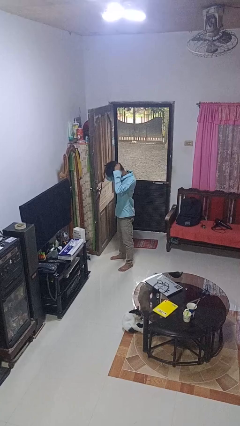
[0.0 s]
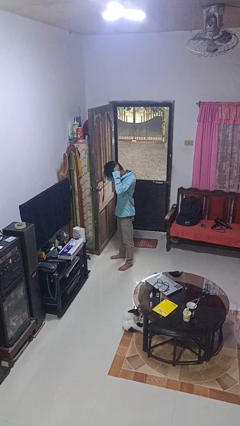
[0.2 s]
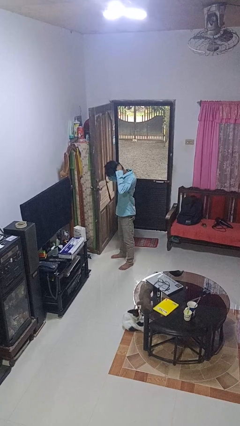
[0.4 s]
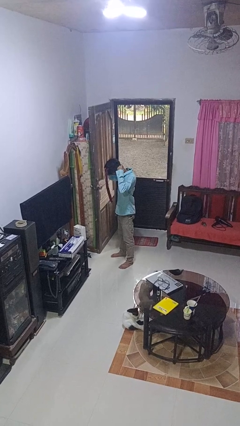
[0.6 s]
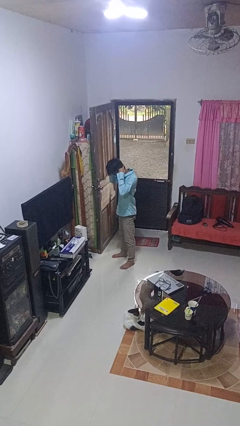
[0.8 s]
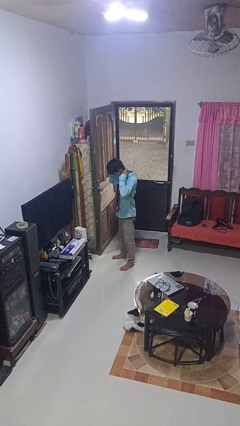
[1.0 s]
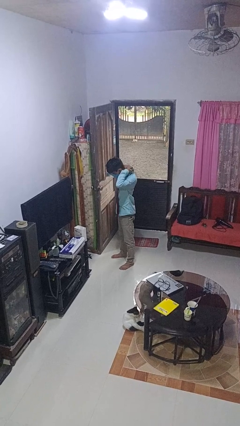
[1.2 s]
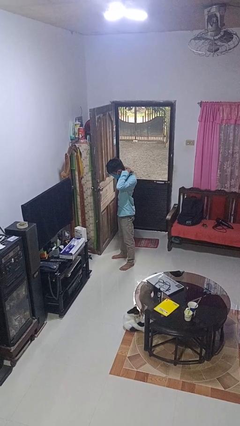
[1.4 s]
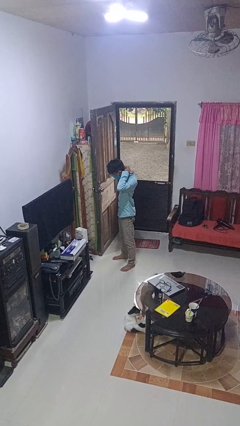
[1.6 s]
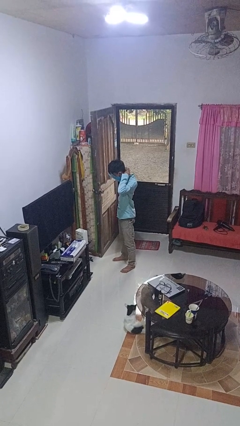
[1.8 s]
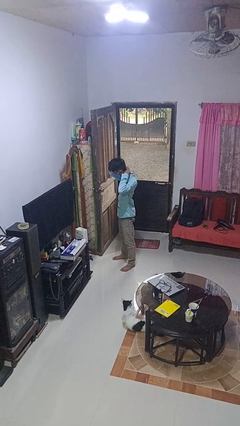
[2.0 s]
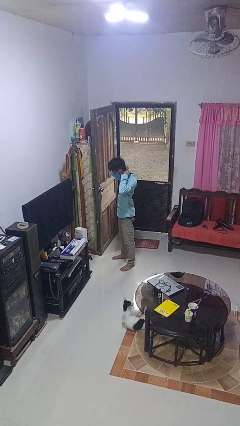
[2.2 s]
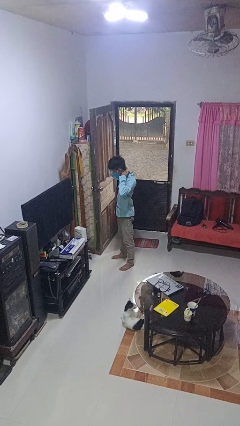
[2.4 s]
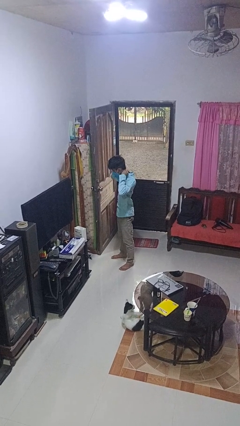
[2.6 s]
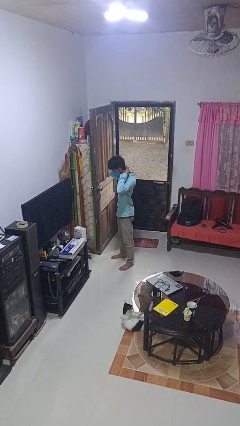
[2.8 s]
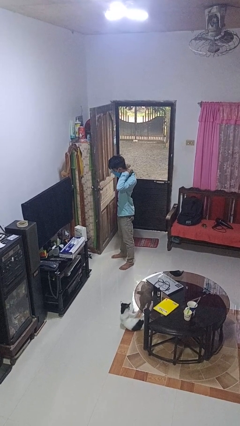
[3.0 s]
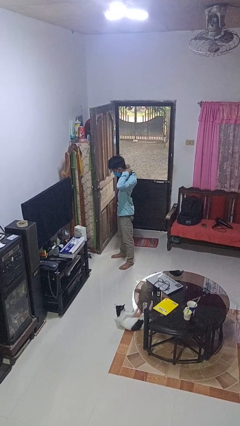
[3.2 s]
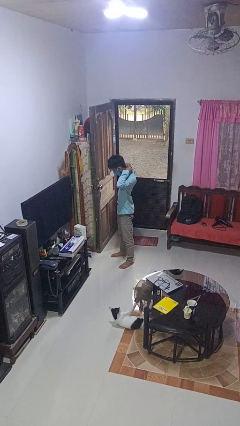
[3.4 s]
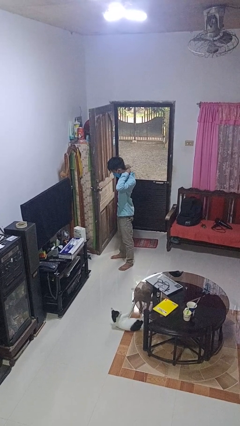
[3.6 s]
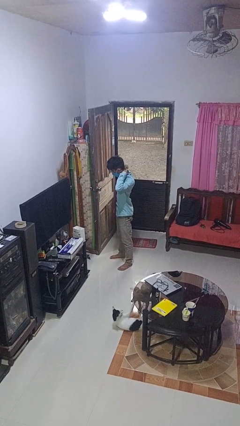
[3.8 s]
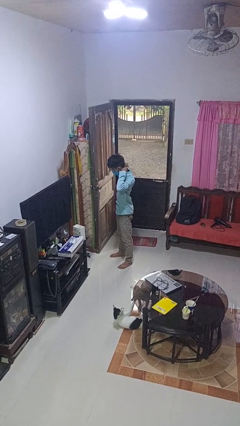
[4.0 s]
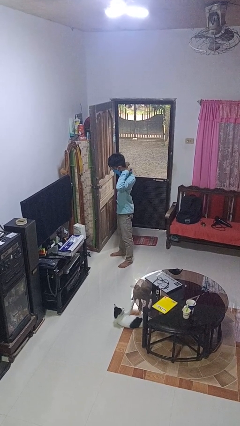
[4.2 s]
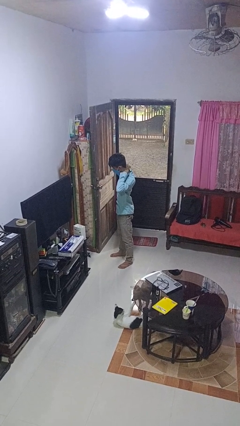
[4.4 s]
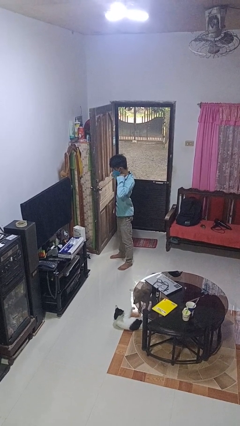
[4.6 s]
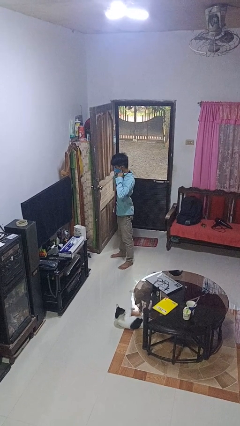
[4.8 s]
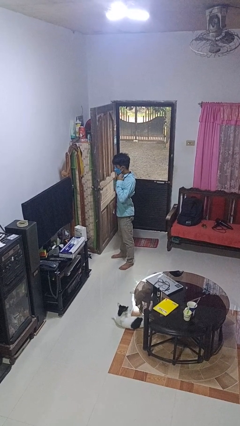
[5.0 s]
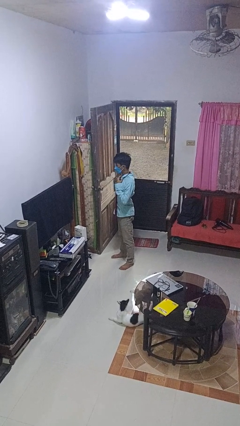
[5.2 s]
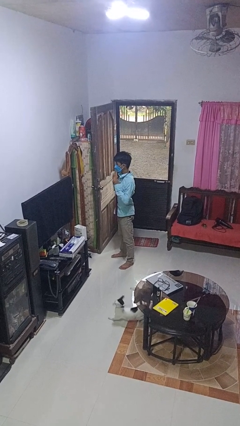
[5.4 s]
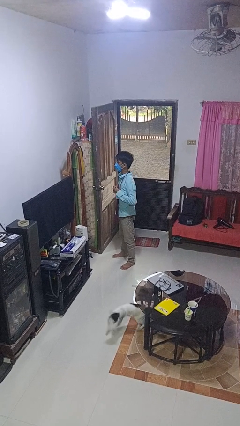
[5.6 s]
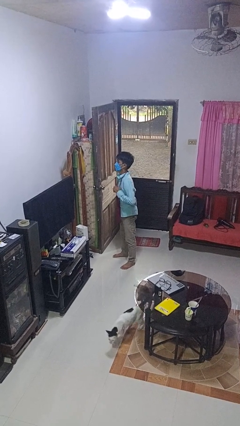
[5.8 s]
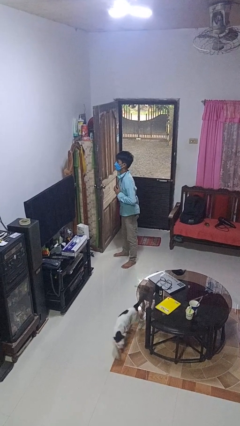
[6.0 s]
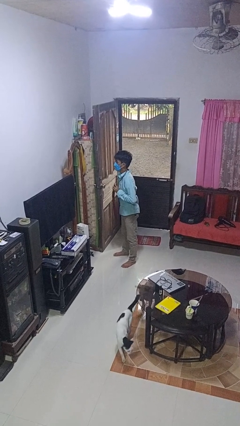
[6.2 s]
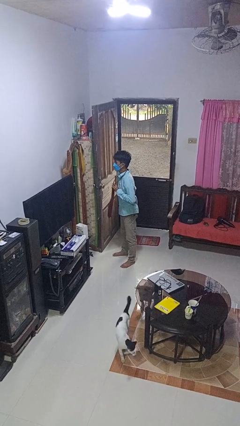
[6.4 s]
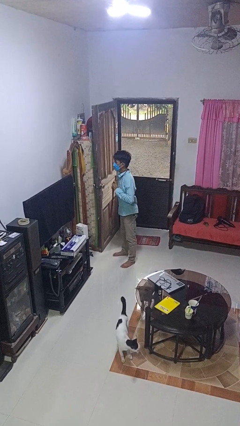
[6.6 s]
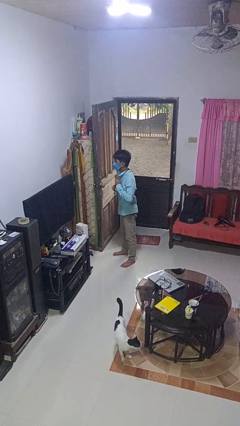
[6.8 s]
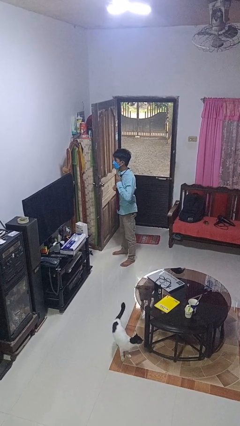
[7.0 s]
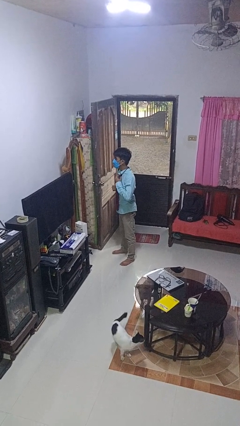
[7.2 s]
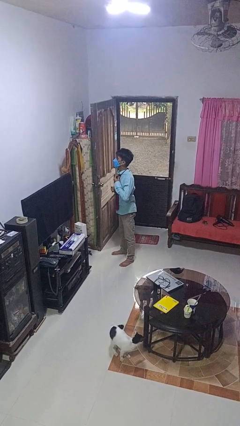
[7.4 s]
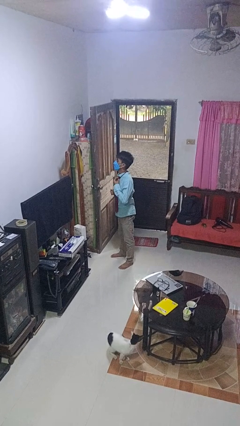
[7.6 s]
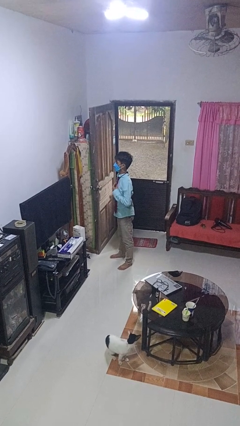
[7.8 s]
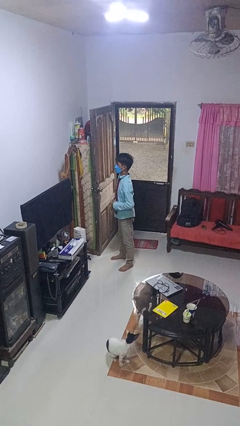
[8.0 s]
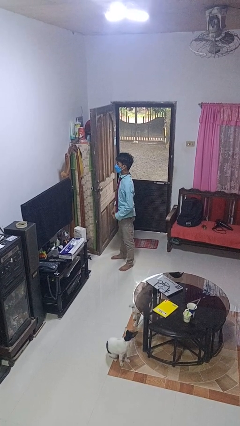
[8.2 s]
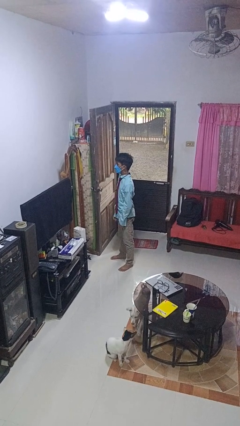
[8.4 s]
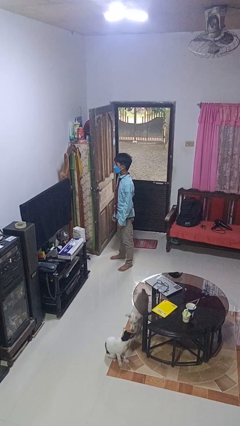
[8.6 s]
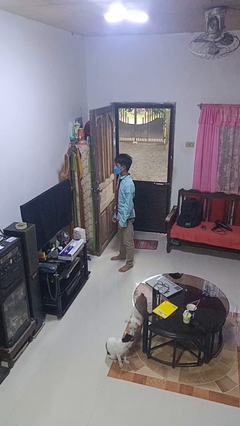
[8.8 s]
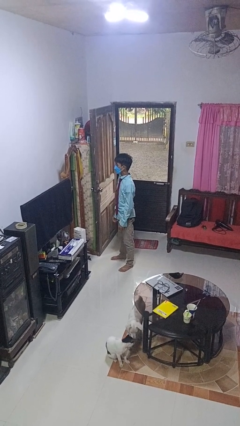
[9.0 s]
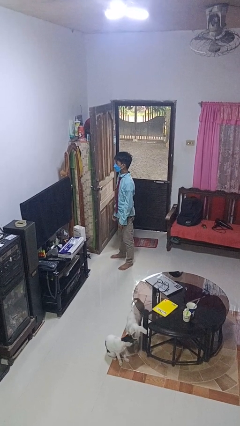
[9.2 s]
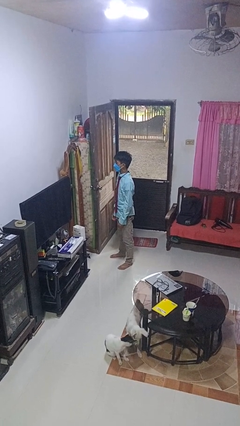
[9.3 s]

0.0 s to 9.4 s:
person puts on necktie

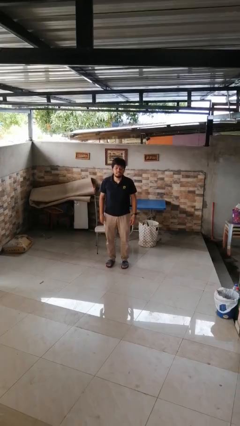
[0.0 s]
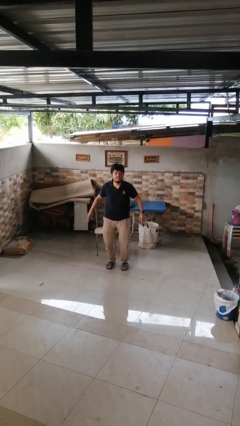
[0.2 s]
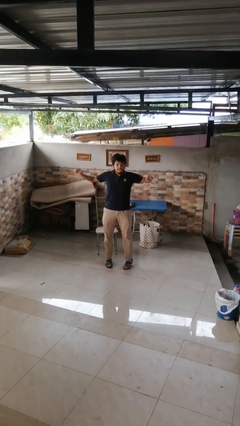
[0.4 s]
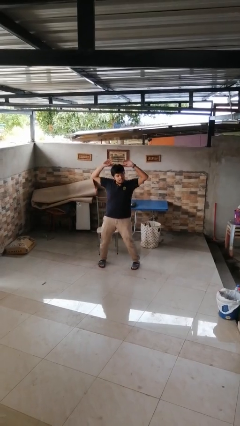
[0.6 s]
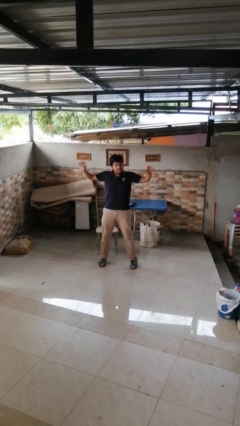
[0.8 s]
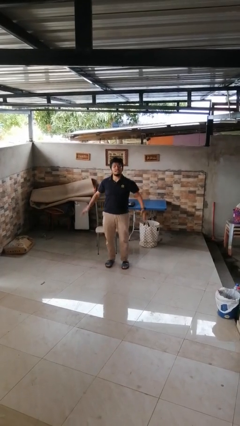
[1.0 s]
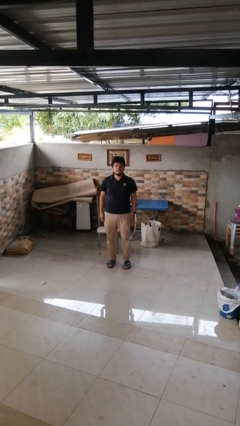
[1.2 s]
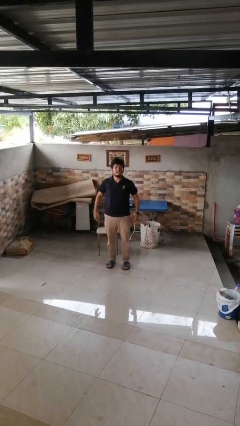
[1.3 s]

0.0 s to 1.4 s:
person exercises with jumping jacks

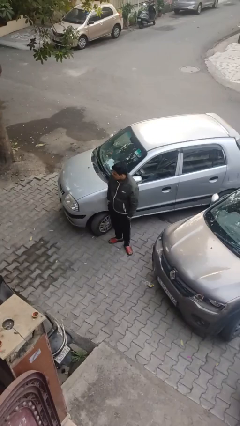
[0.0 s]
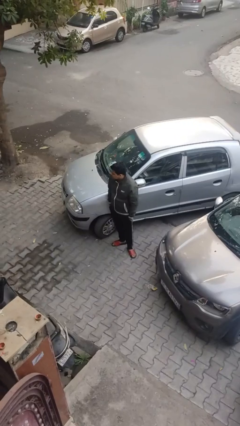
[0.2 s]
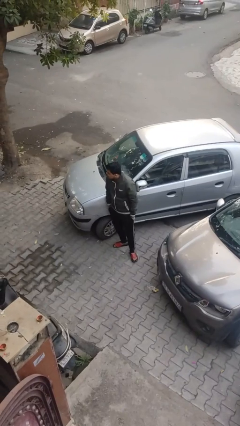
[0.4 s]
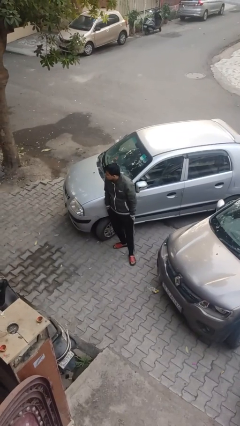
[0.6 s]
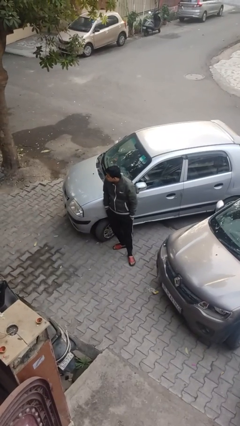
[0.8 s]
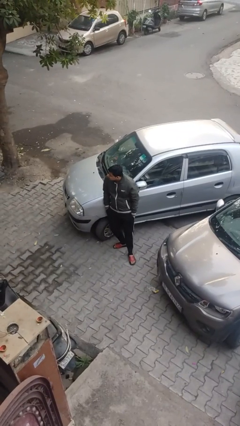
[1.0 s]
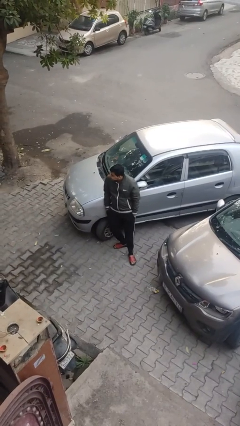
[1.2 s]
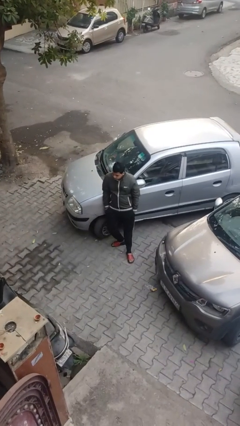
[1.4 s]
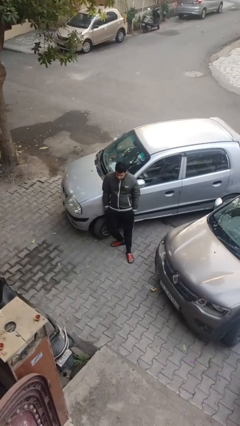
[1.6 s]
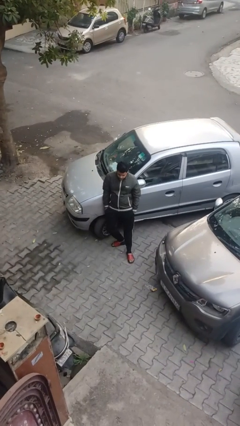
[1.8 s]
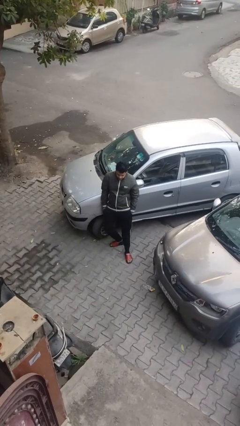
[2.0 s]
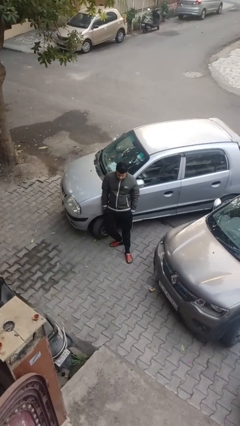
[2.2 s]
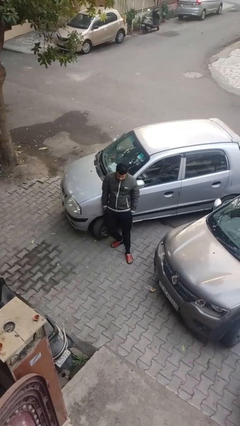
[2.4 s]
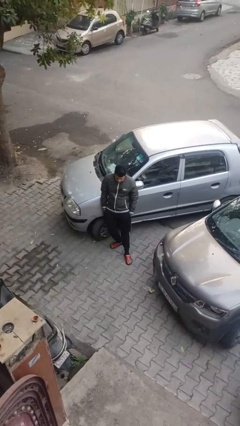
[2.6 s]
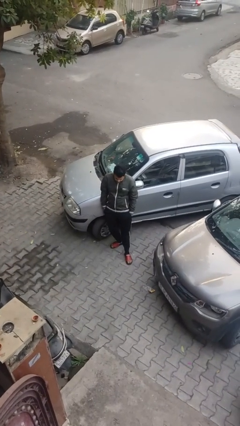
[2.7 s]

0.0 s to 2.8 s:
person leans against car

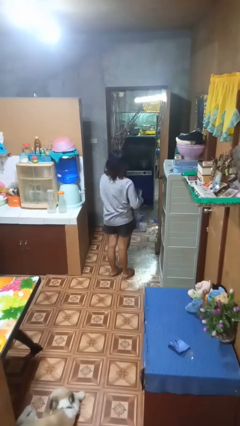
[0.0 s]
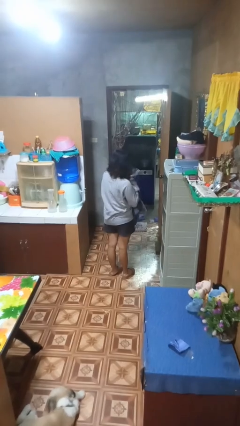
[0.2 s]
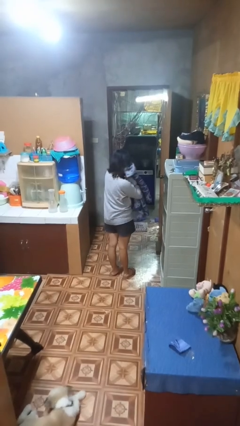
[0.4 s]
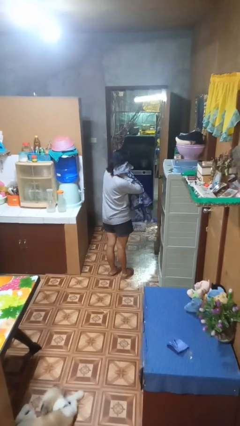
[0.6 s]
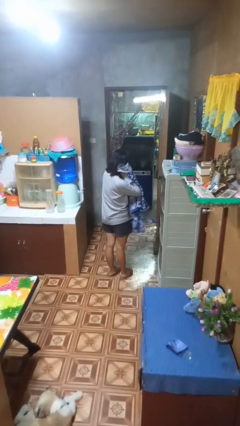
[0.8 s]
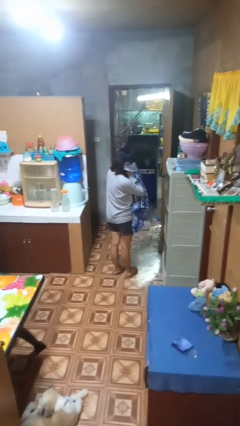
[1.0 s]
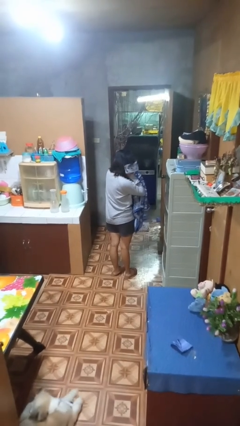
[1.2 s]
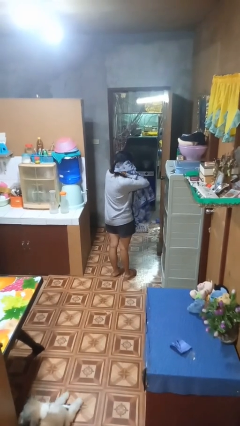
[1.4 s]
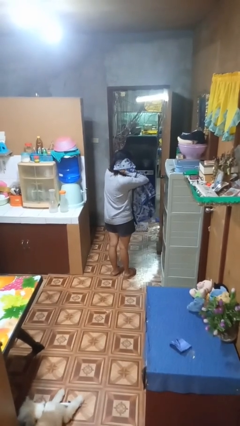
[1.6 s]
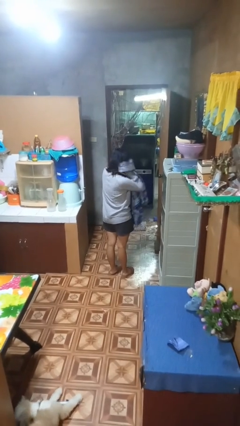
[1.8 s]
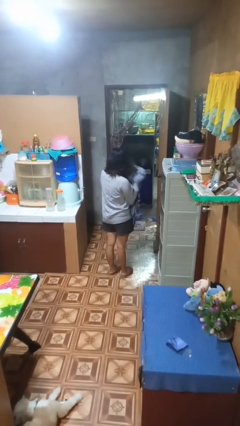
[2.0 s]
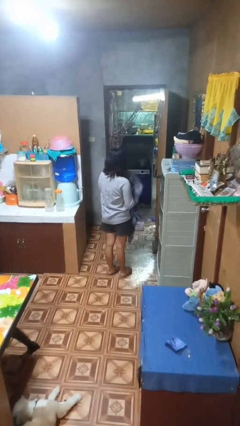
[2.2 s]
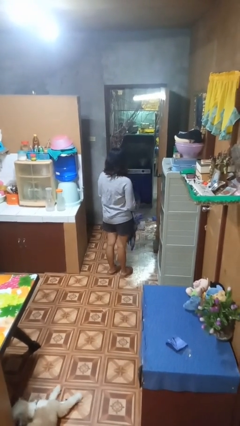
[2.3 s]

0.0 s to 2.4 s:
person dries hair with towel

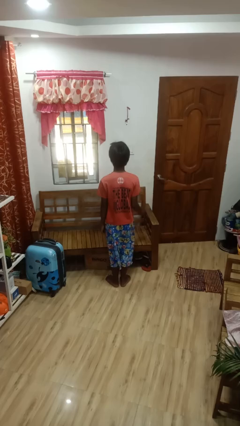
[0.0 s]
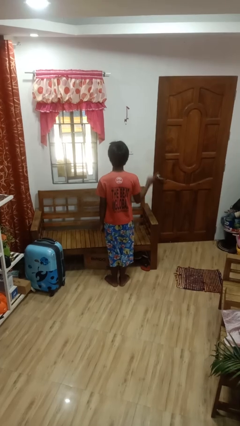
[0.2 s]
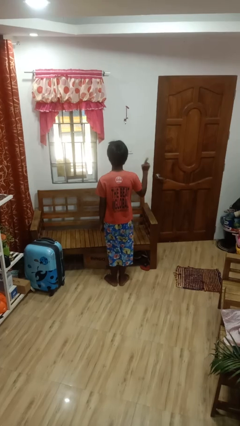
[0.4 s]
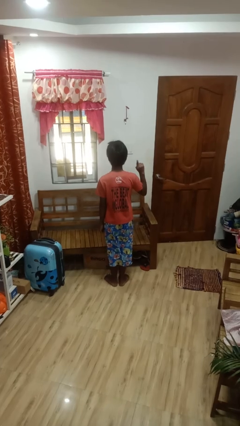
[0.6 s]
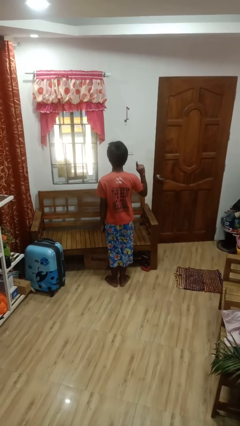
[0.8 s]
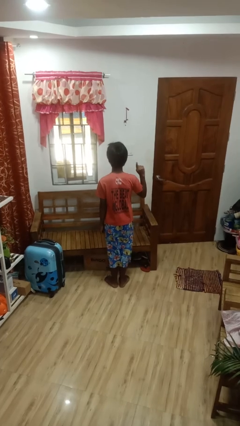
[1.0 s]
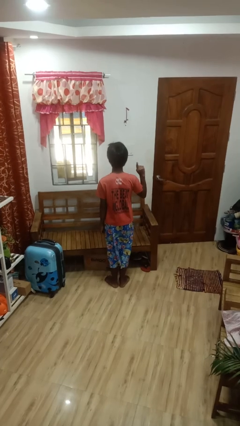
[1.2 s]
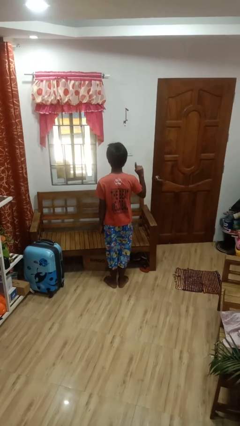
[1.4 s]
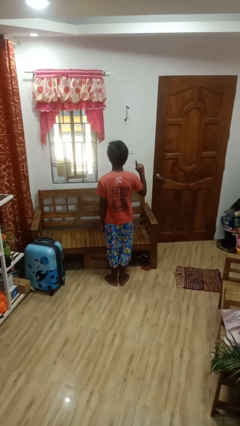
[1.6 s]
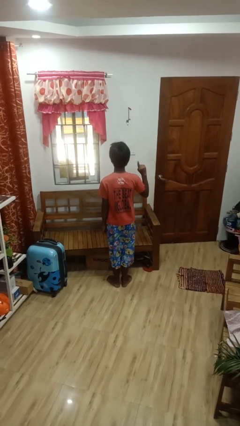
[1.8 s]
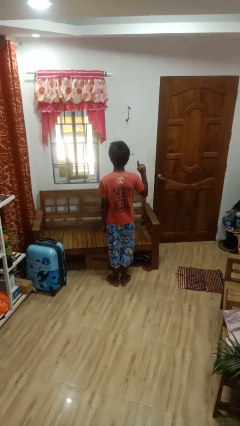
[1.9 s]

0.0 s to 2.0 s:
person gestures number one
